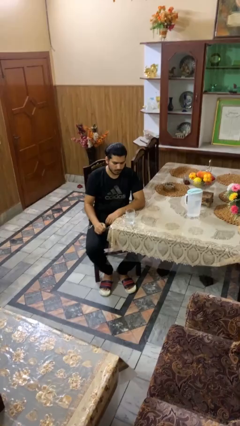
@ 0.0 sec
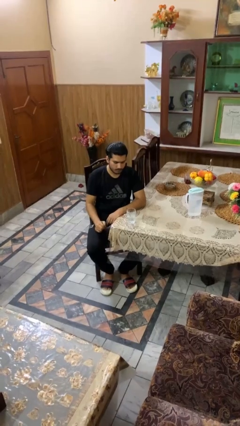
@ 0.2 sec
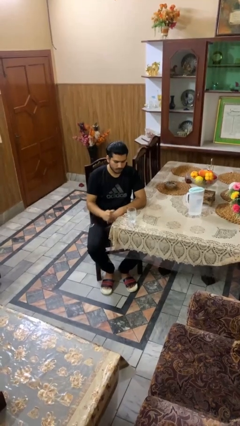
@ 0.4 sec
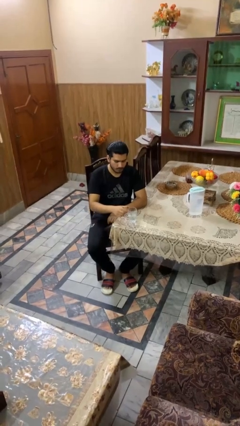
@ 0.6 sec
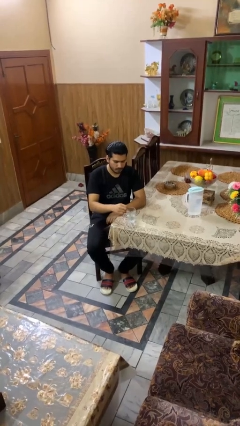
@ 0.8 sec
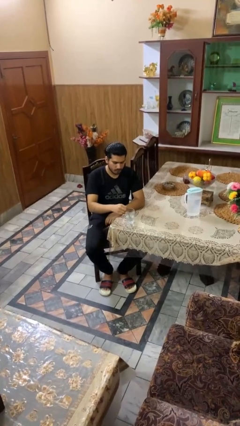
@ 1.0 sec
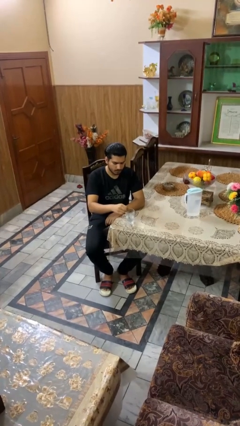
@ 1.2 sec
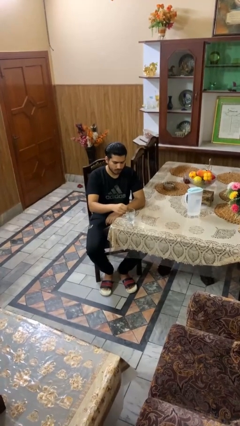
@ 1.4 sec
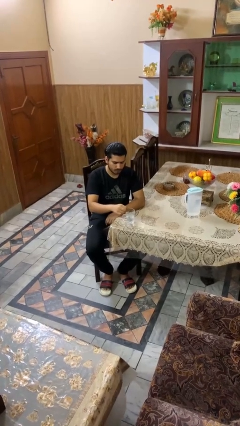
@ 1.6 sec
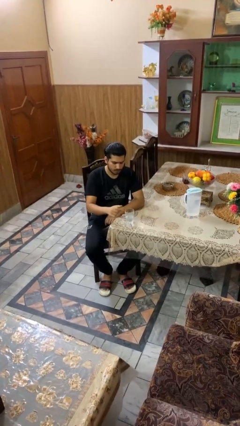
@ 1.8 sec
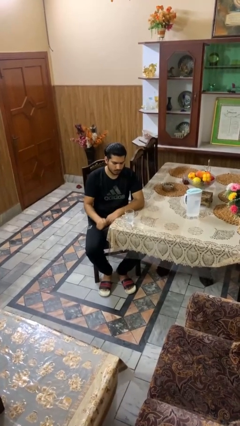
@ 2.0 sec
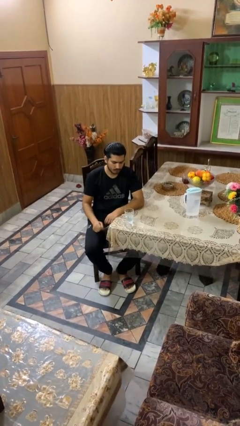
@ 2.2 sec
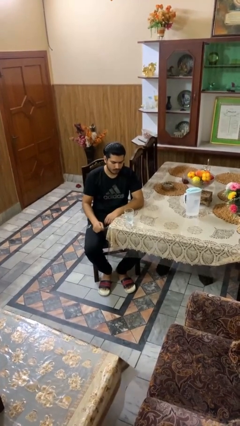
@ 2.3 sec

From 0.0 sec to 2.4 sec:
person stirs mug

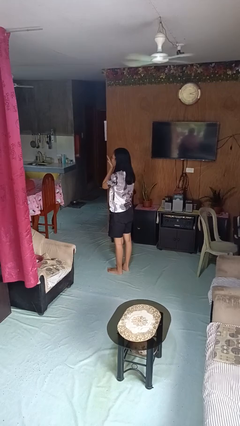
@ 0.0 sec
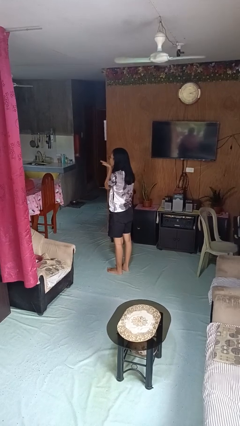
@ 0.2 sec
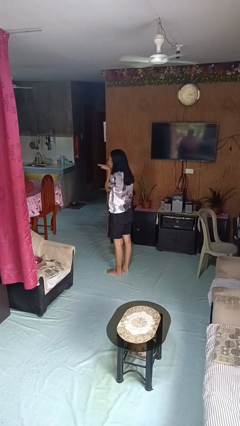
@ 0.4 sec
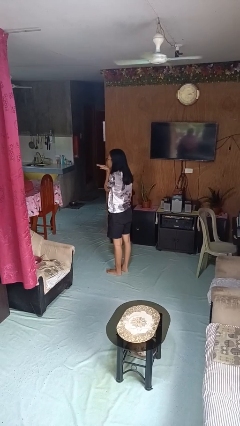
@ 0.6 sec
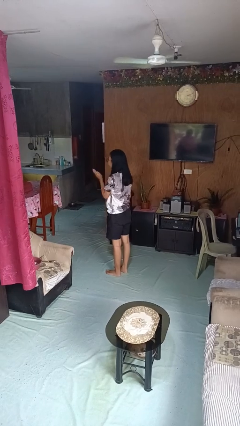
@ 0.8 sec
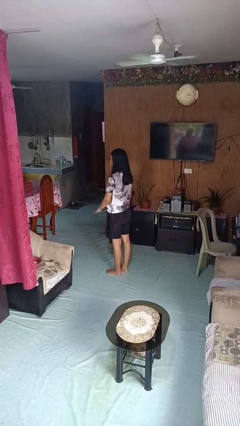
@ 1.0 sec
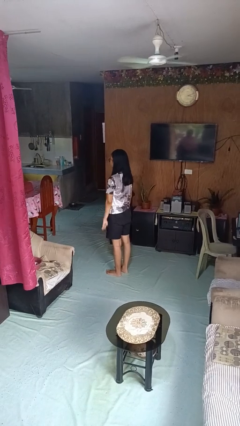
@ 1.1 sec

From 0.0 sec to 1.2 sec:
person gestures blow kiss

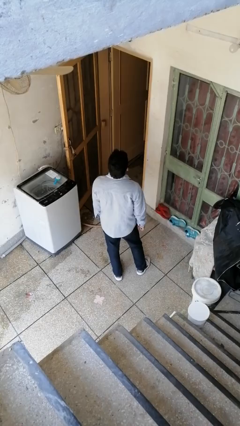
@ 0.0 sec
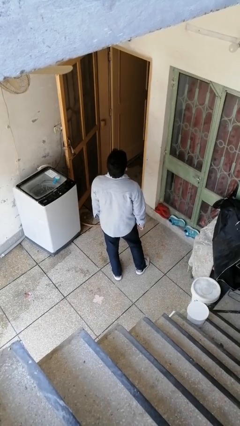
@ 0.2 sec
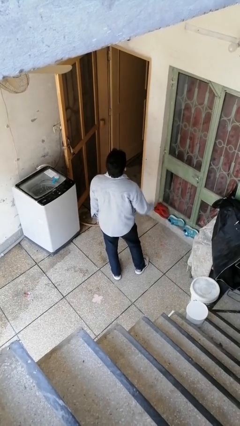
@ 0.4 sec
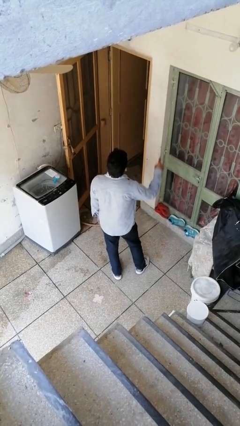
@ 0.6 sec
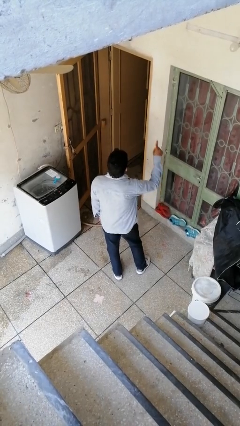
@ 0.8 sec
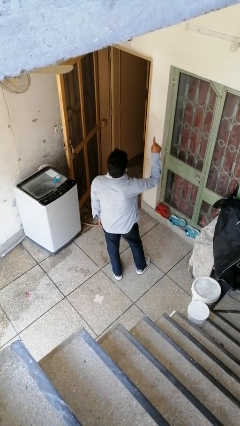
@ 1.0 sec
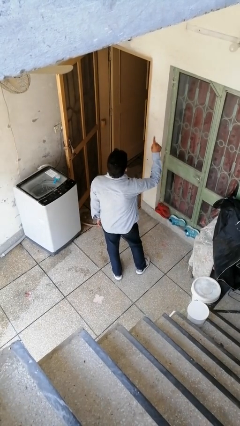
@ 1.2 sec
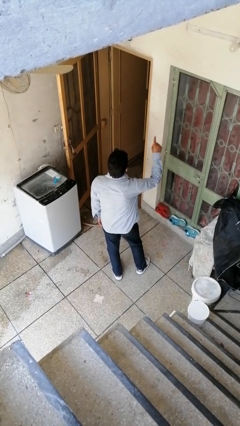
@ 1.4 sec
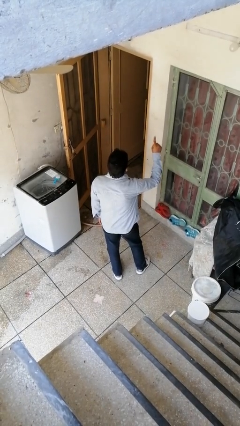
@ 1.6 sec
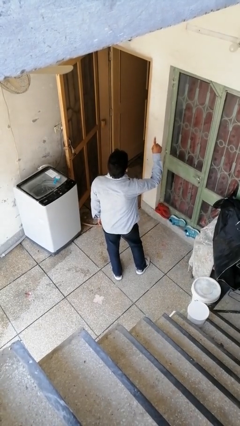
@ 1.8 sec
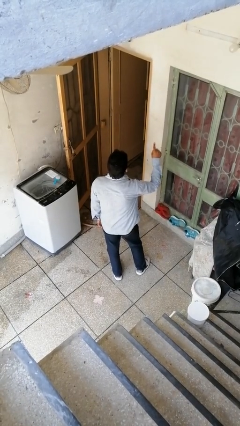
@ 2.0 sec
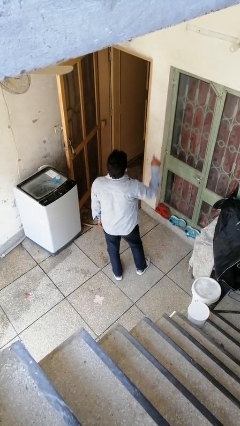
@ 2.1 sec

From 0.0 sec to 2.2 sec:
person gestures number one

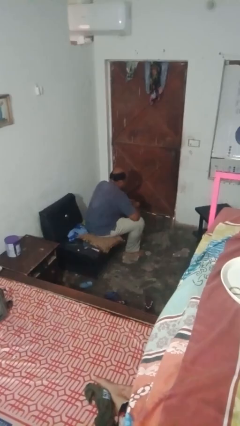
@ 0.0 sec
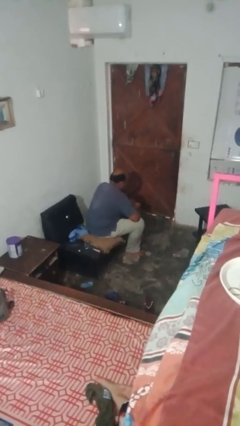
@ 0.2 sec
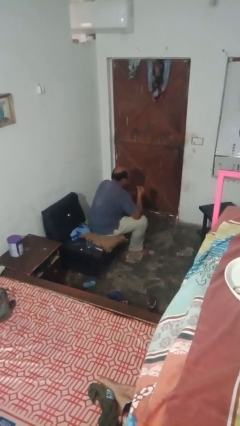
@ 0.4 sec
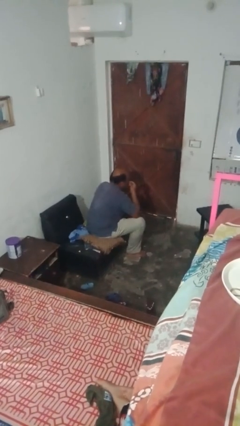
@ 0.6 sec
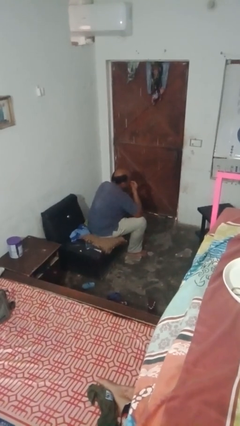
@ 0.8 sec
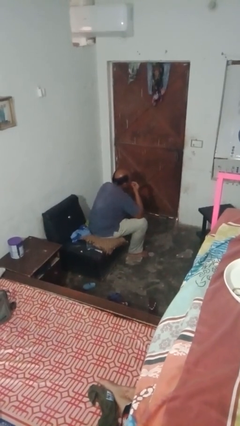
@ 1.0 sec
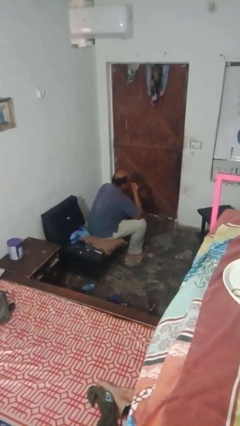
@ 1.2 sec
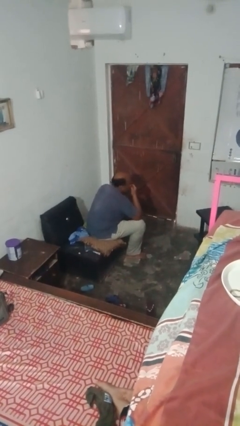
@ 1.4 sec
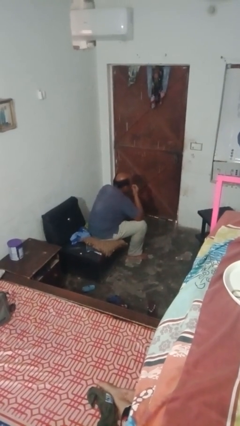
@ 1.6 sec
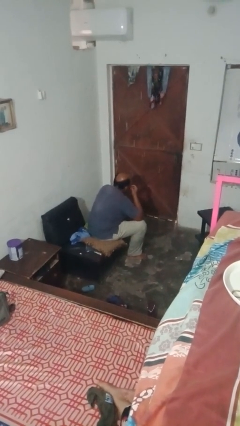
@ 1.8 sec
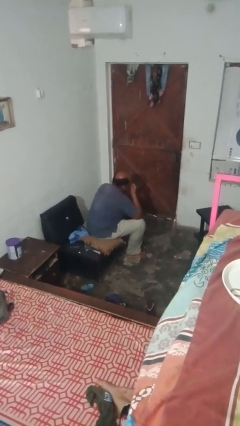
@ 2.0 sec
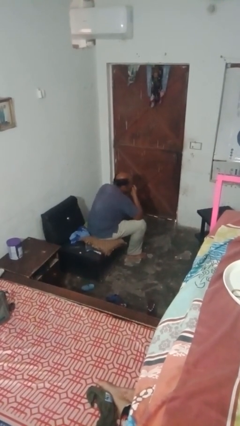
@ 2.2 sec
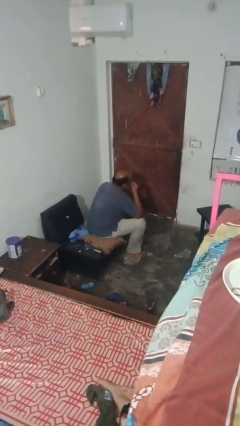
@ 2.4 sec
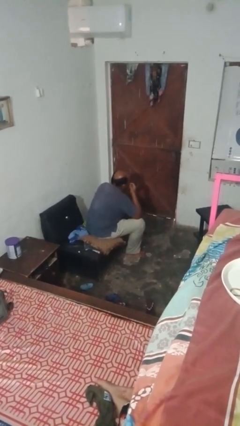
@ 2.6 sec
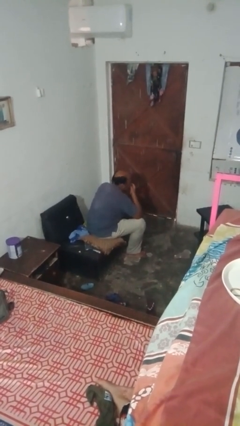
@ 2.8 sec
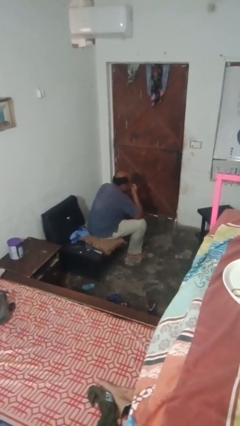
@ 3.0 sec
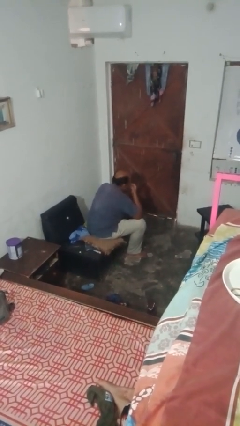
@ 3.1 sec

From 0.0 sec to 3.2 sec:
person applies lip makeup

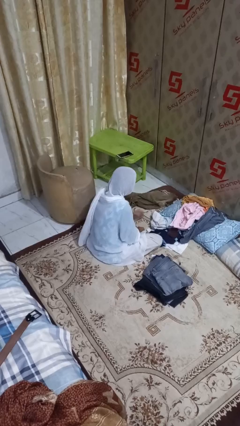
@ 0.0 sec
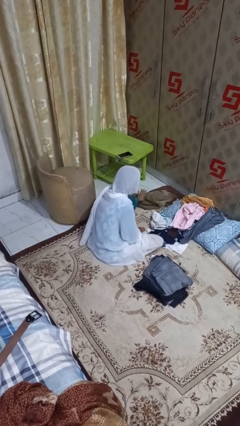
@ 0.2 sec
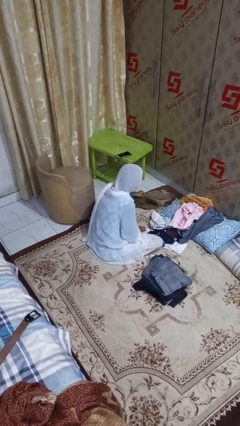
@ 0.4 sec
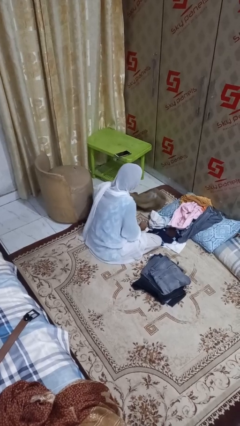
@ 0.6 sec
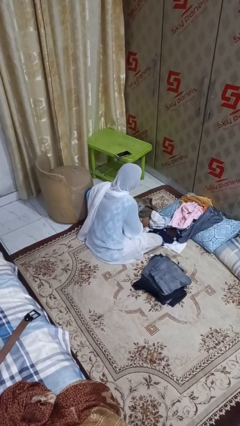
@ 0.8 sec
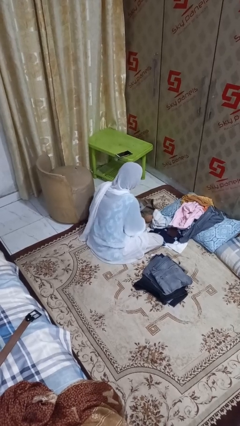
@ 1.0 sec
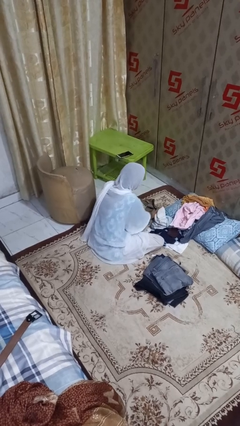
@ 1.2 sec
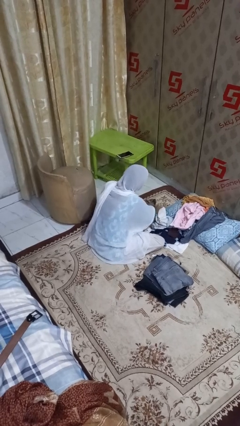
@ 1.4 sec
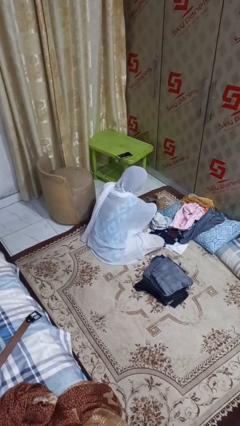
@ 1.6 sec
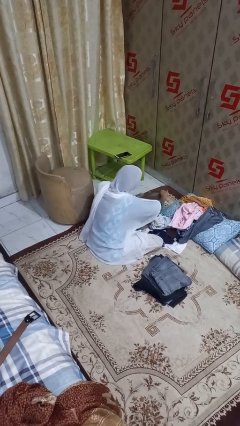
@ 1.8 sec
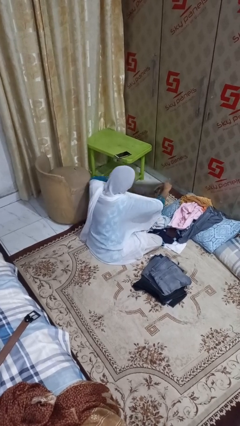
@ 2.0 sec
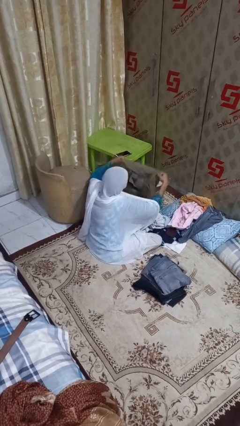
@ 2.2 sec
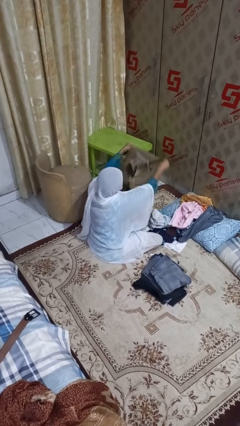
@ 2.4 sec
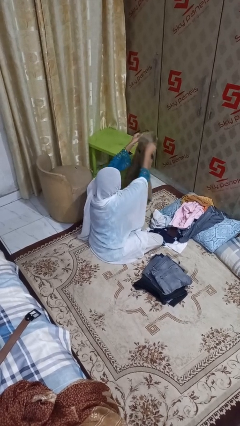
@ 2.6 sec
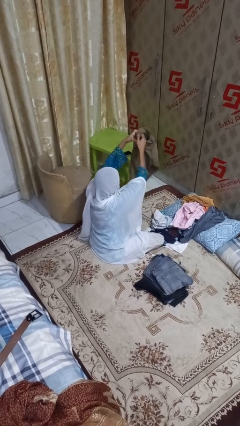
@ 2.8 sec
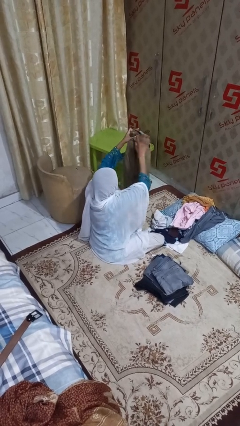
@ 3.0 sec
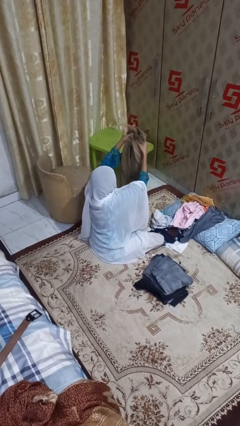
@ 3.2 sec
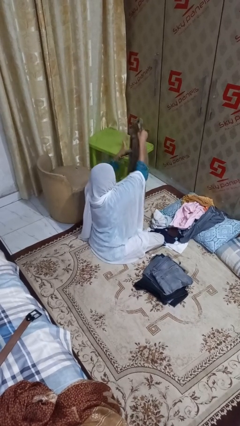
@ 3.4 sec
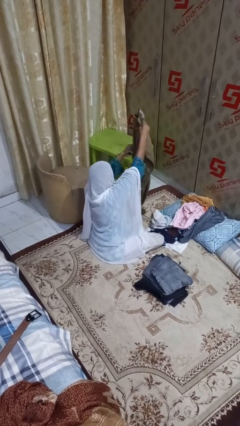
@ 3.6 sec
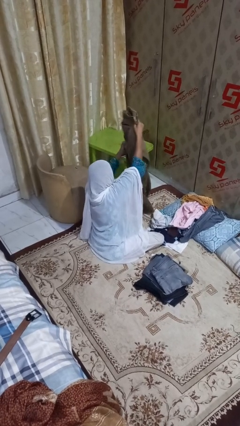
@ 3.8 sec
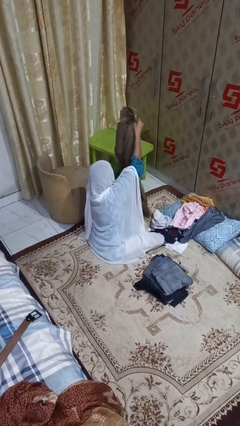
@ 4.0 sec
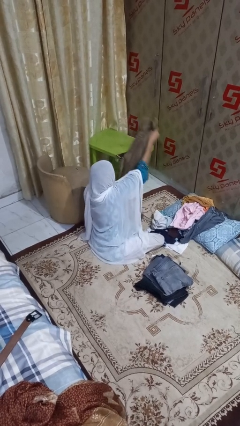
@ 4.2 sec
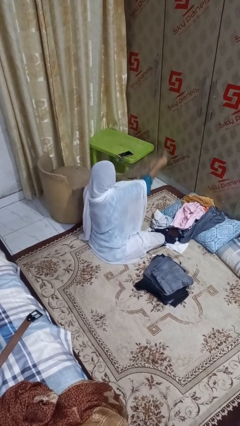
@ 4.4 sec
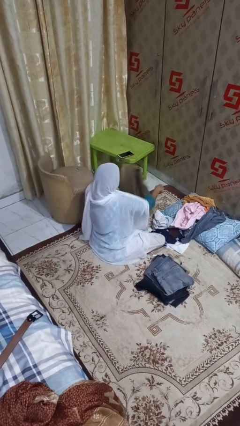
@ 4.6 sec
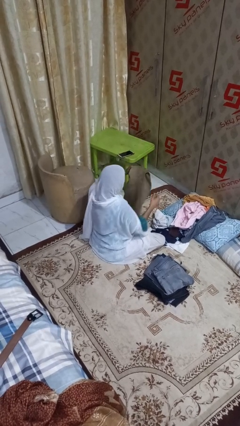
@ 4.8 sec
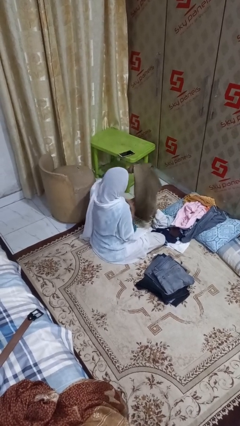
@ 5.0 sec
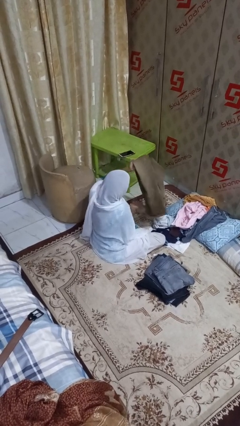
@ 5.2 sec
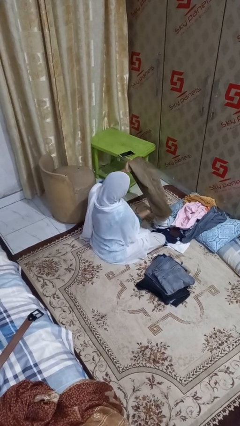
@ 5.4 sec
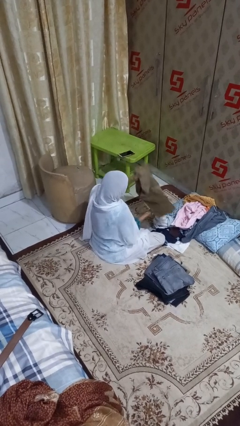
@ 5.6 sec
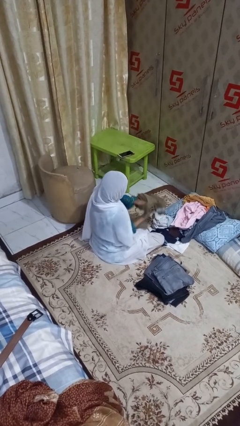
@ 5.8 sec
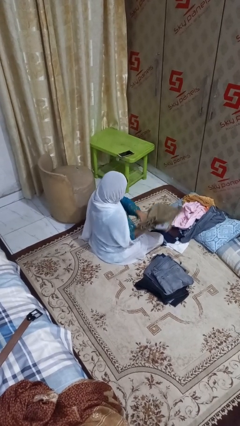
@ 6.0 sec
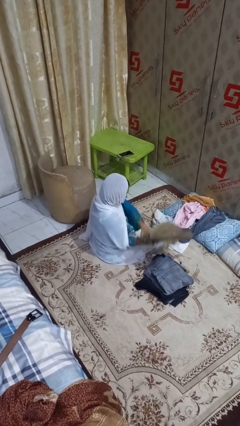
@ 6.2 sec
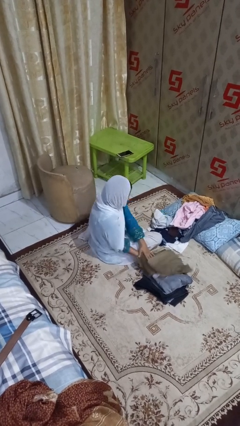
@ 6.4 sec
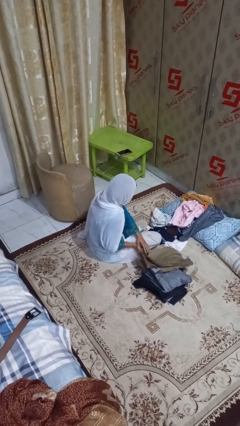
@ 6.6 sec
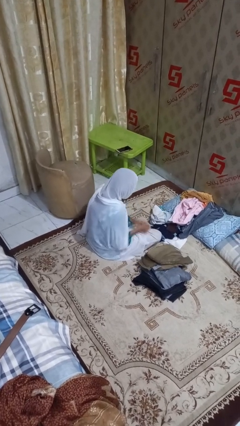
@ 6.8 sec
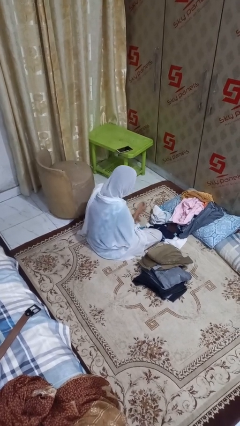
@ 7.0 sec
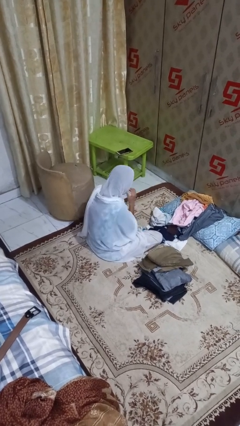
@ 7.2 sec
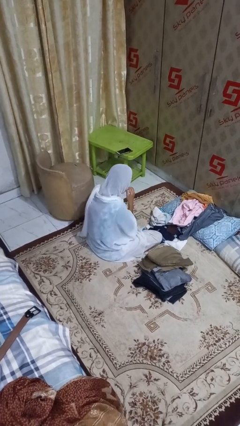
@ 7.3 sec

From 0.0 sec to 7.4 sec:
person folds pants

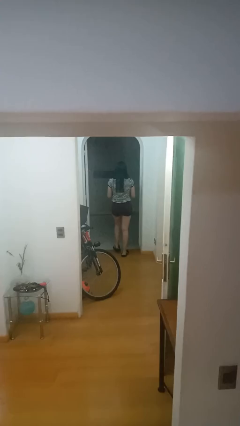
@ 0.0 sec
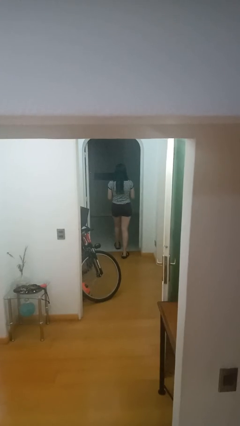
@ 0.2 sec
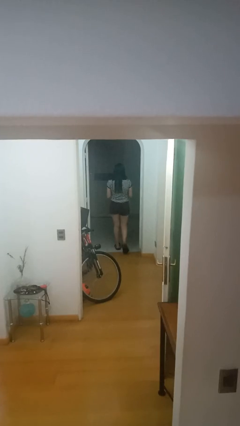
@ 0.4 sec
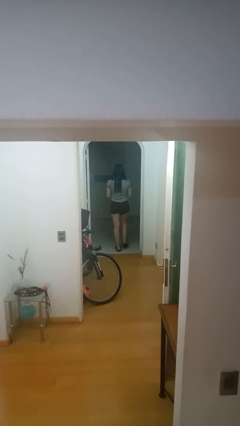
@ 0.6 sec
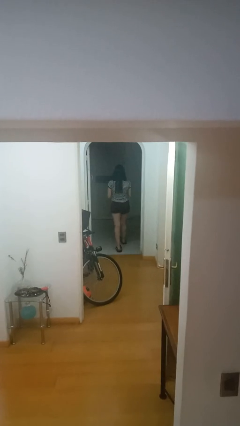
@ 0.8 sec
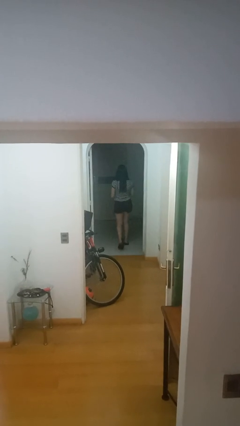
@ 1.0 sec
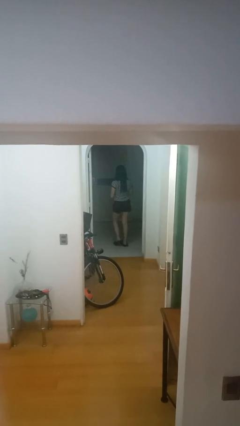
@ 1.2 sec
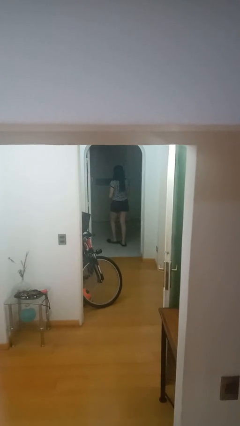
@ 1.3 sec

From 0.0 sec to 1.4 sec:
person exits scene through structure
